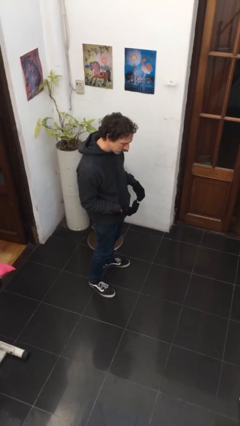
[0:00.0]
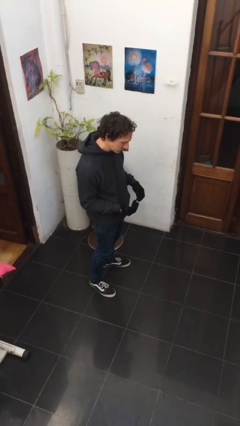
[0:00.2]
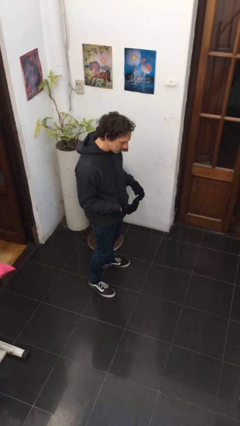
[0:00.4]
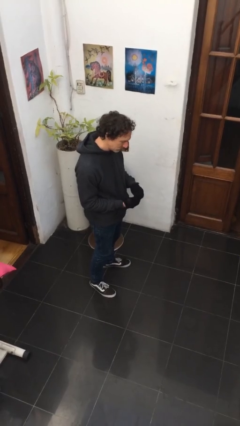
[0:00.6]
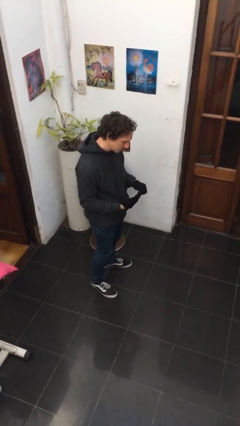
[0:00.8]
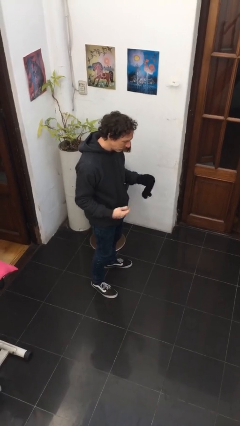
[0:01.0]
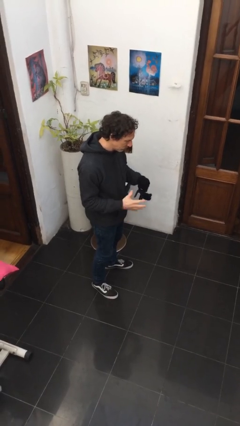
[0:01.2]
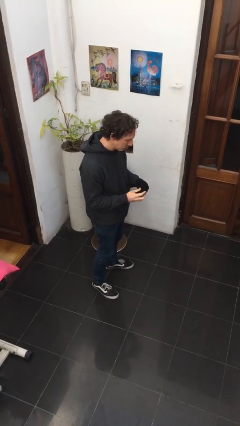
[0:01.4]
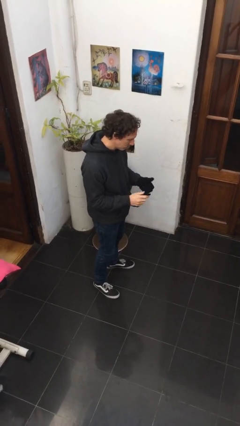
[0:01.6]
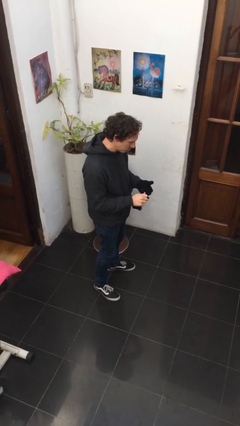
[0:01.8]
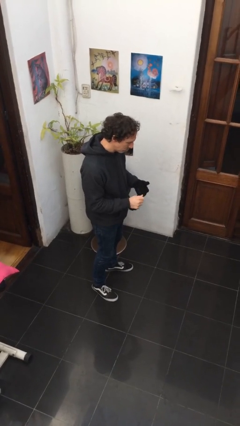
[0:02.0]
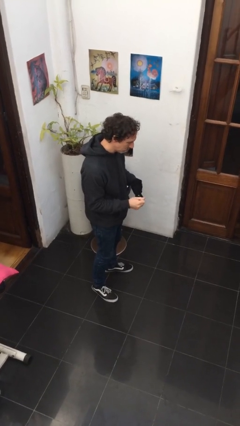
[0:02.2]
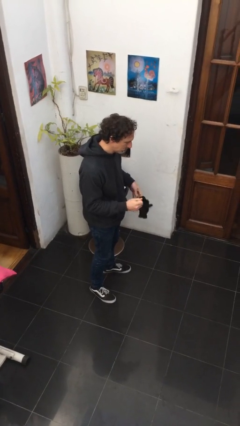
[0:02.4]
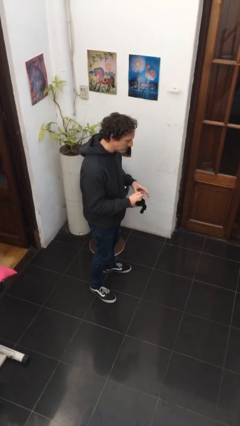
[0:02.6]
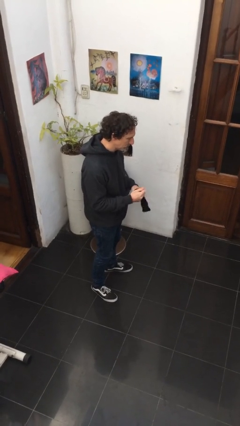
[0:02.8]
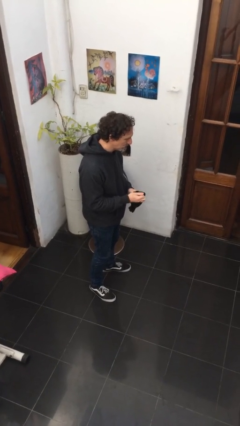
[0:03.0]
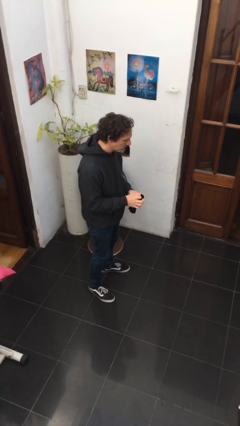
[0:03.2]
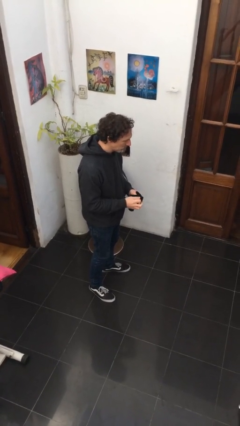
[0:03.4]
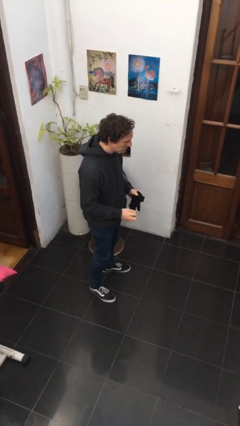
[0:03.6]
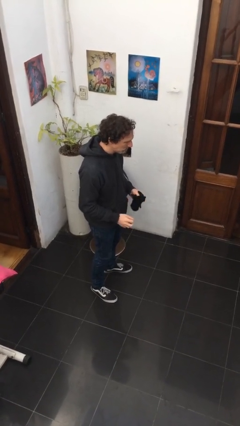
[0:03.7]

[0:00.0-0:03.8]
person takes off gloves

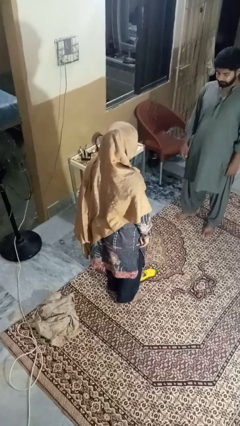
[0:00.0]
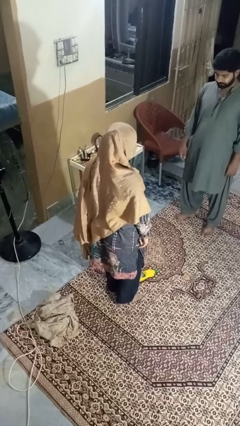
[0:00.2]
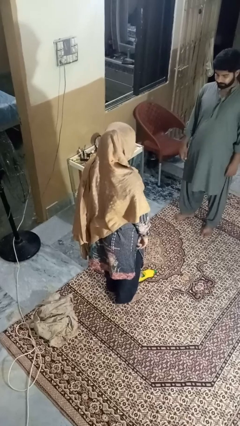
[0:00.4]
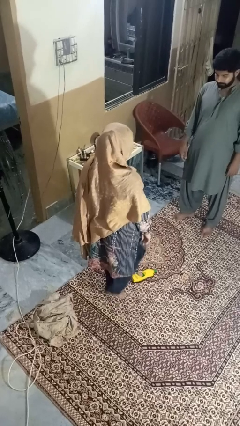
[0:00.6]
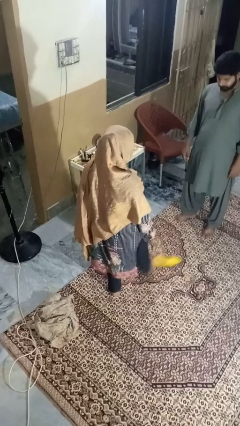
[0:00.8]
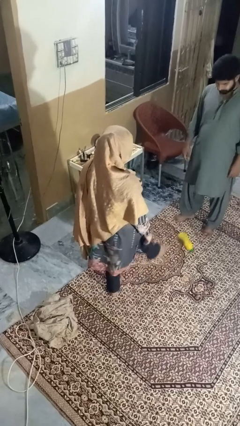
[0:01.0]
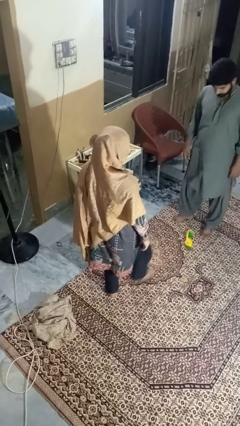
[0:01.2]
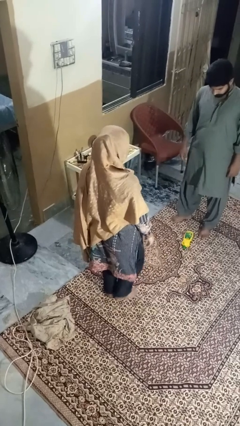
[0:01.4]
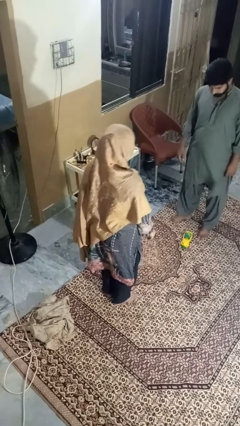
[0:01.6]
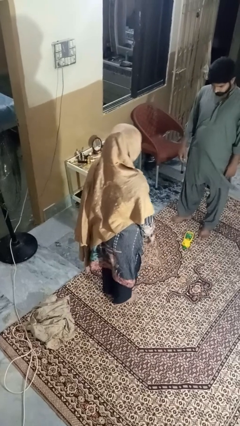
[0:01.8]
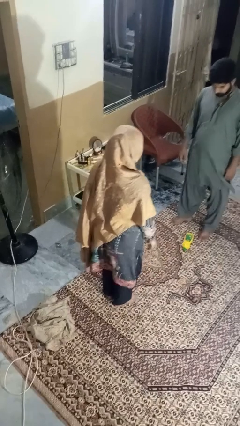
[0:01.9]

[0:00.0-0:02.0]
person kicks object to person

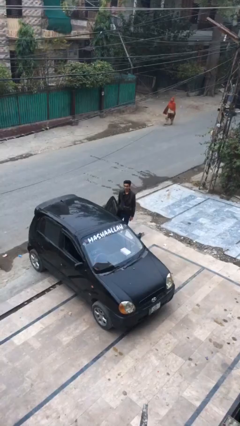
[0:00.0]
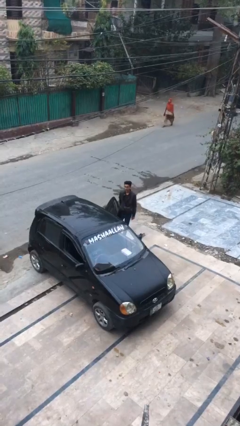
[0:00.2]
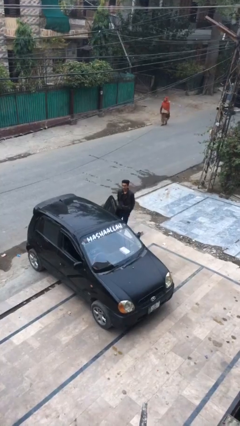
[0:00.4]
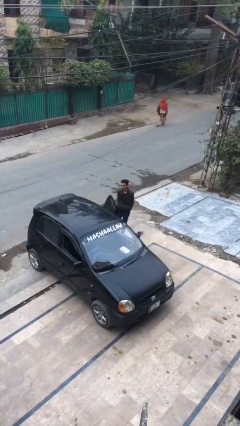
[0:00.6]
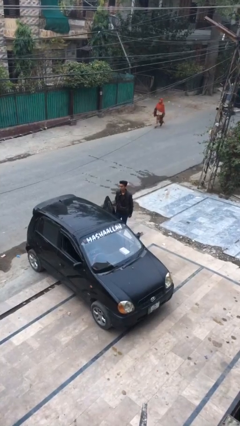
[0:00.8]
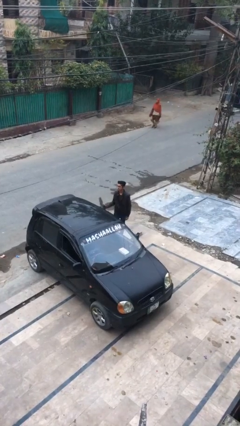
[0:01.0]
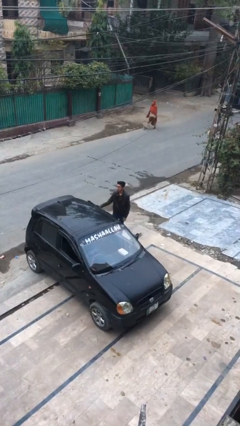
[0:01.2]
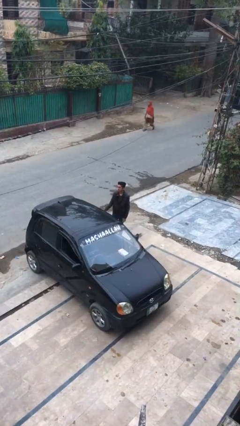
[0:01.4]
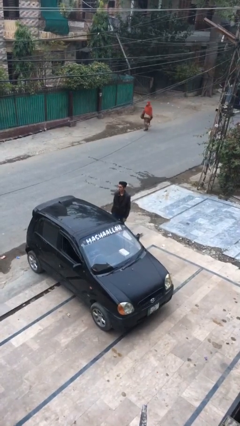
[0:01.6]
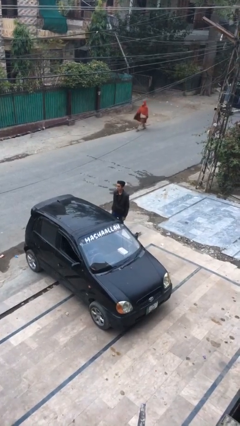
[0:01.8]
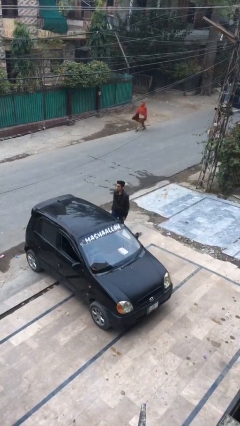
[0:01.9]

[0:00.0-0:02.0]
person closes car door

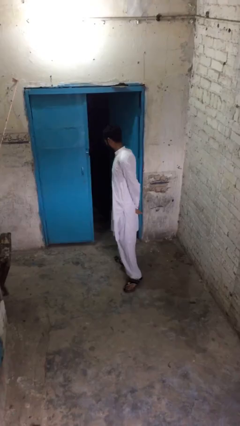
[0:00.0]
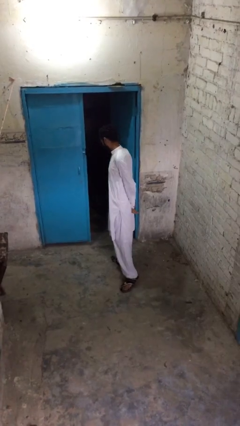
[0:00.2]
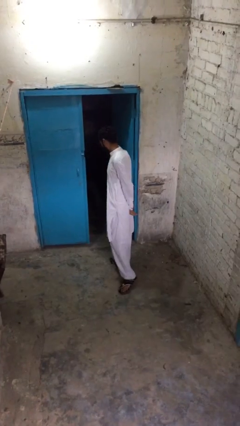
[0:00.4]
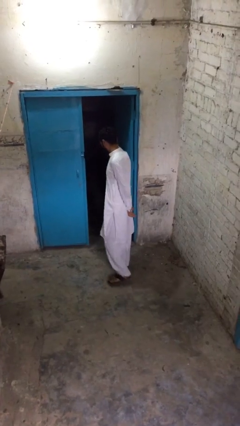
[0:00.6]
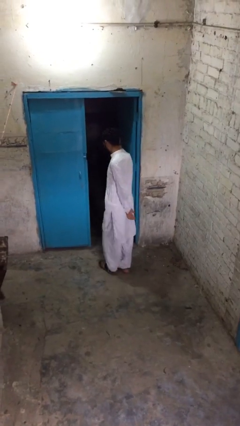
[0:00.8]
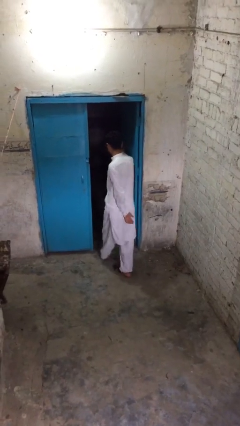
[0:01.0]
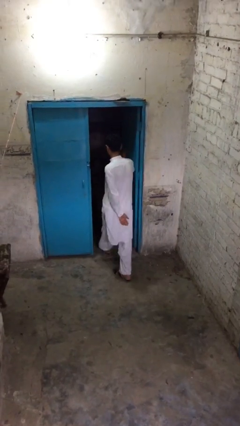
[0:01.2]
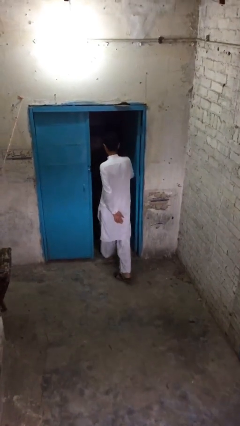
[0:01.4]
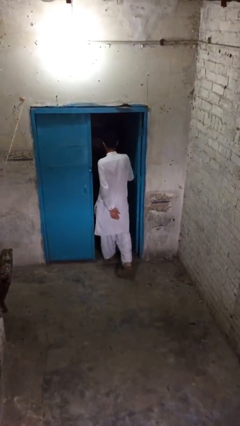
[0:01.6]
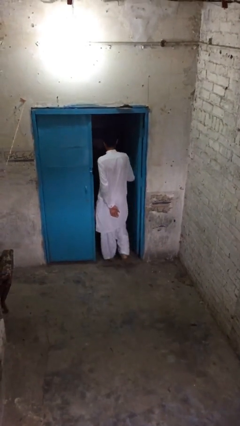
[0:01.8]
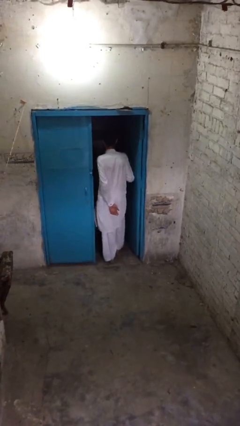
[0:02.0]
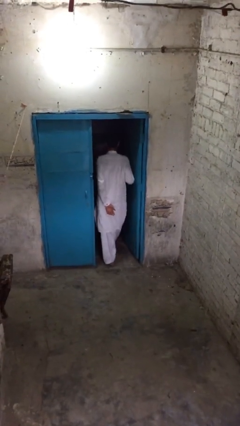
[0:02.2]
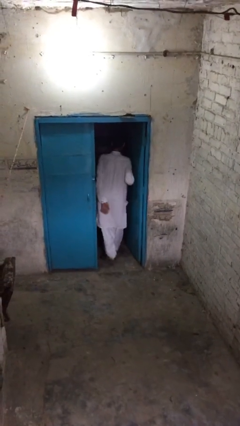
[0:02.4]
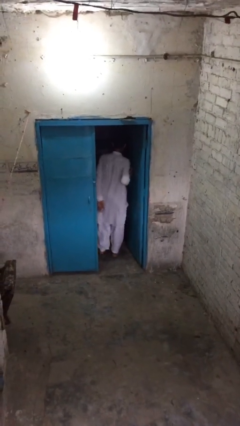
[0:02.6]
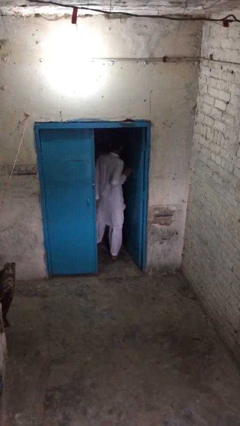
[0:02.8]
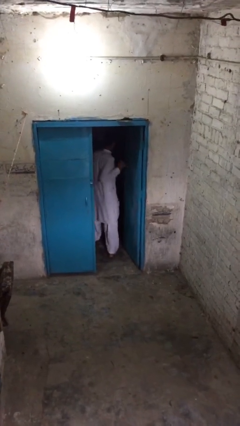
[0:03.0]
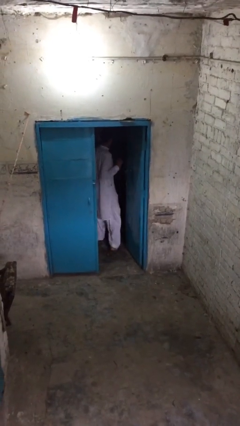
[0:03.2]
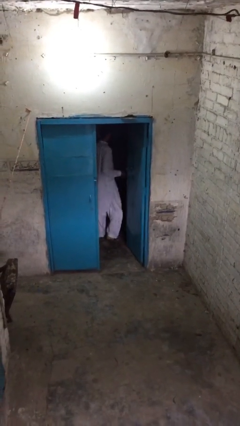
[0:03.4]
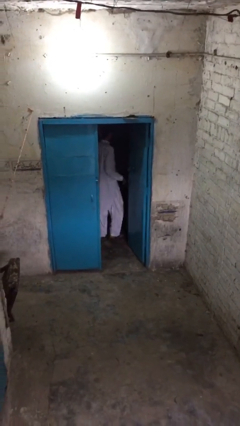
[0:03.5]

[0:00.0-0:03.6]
person exits scene through structure

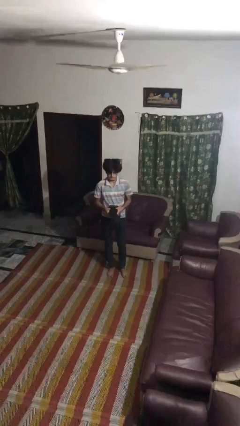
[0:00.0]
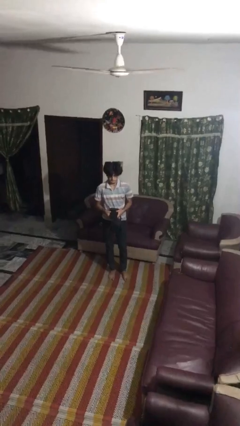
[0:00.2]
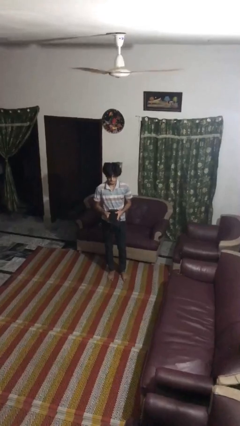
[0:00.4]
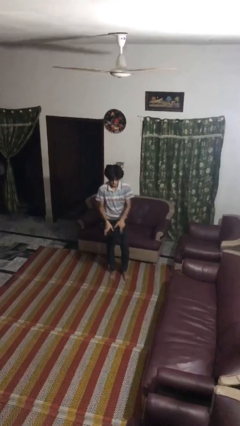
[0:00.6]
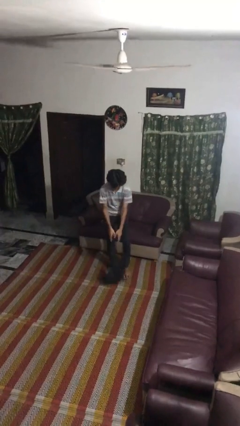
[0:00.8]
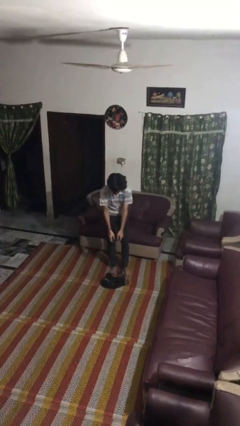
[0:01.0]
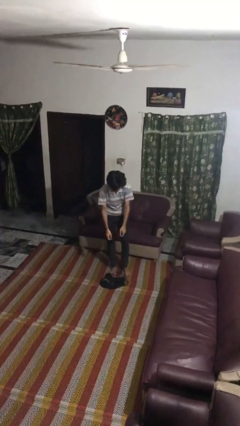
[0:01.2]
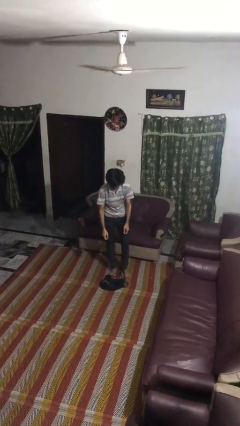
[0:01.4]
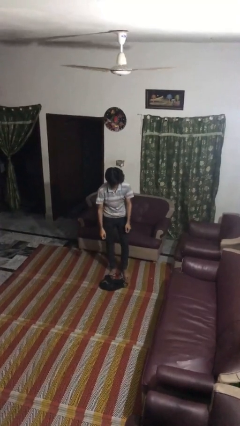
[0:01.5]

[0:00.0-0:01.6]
person drops object

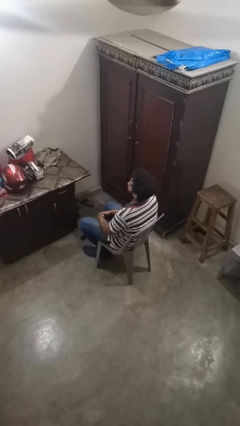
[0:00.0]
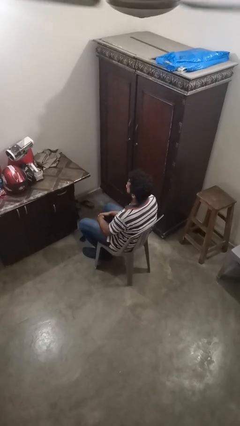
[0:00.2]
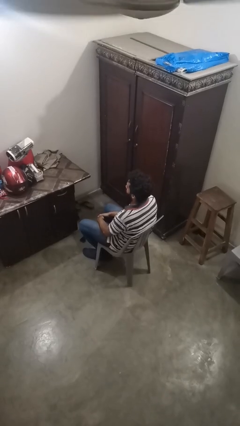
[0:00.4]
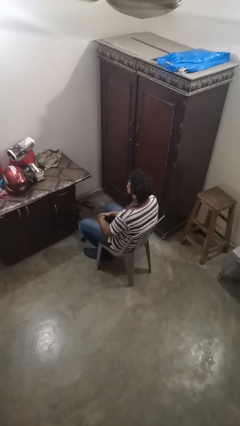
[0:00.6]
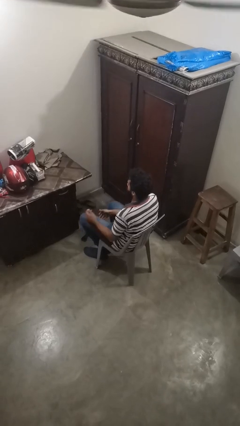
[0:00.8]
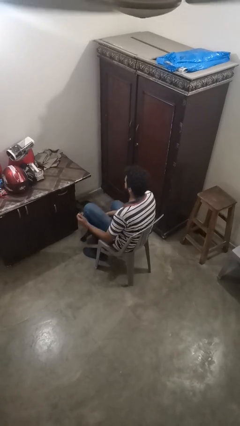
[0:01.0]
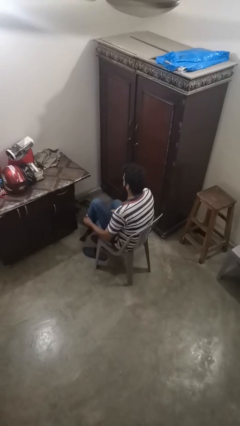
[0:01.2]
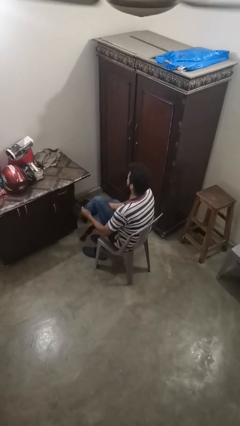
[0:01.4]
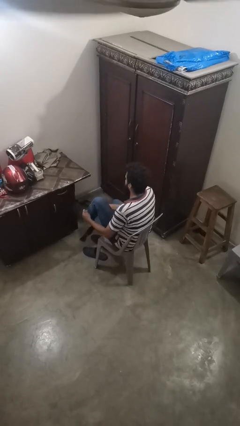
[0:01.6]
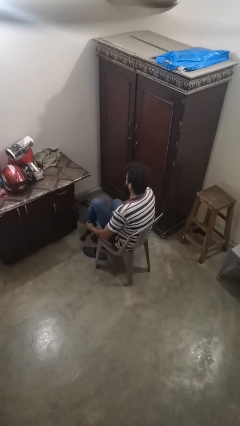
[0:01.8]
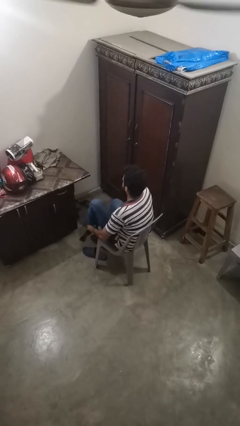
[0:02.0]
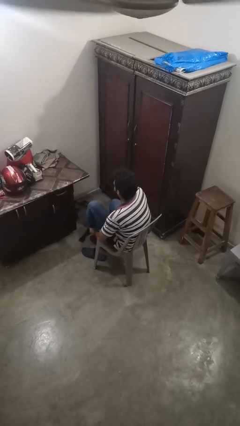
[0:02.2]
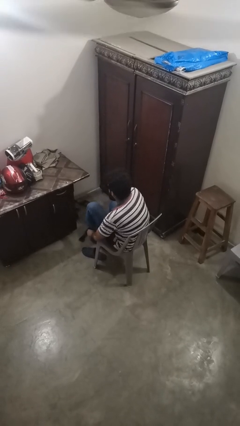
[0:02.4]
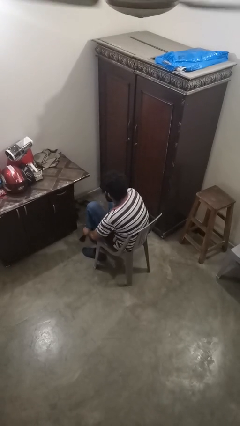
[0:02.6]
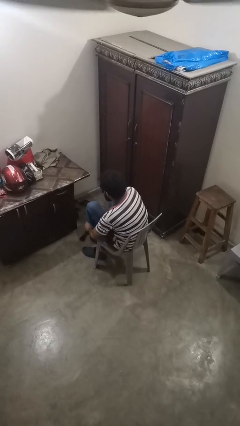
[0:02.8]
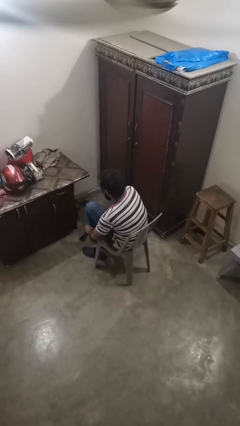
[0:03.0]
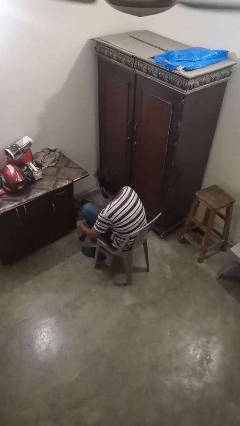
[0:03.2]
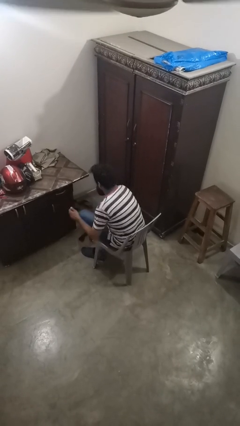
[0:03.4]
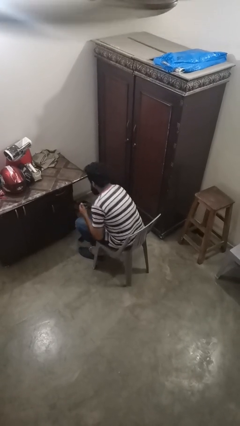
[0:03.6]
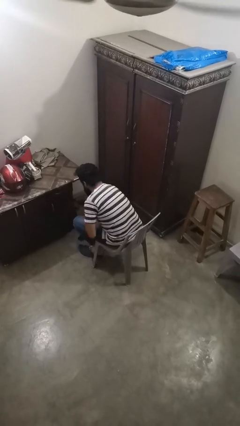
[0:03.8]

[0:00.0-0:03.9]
person takes off socks

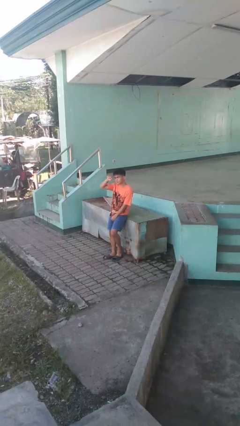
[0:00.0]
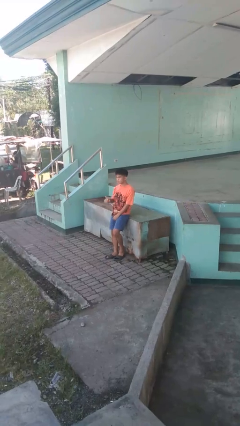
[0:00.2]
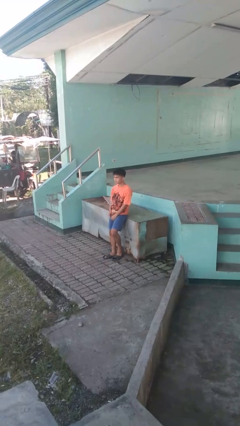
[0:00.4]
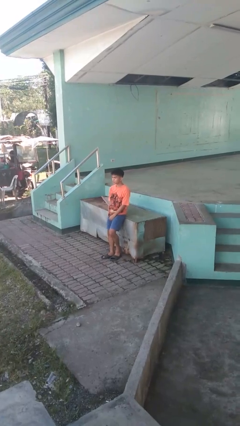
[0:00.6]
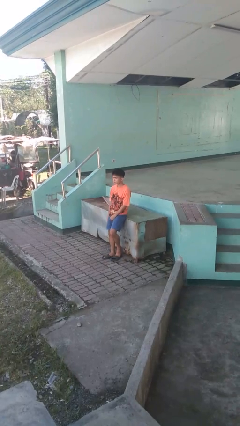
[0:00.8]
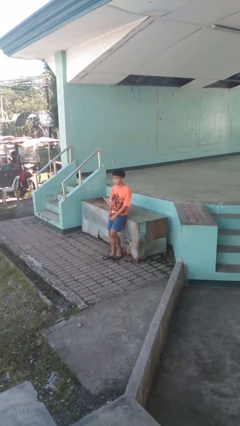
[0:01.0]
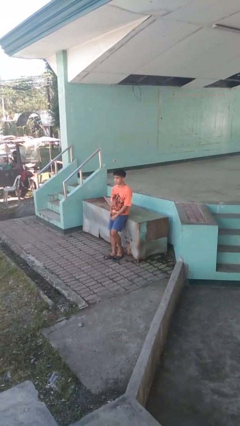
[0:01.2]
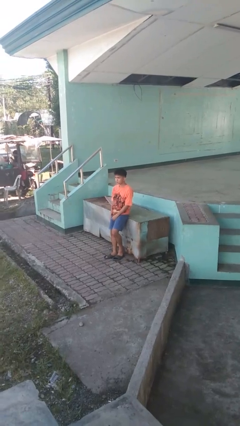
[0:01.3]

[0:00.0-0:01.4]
person gestures lower hand
